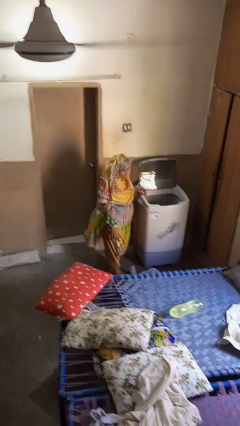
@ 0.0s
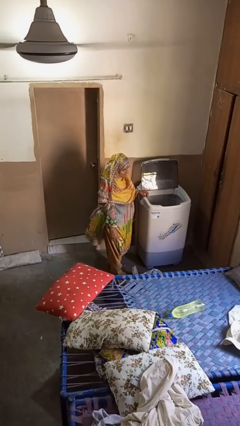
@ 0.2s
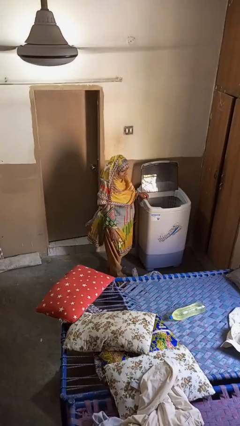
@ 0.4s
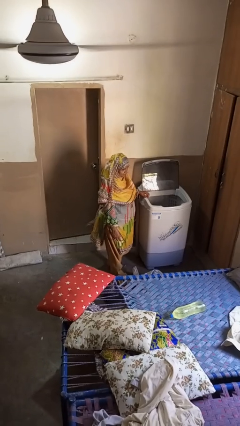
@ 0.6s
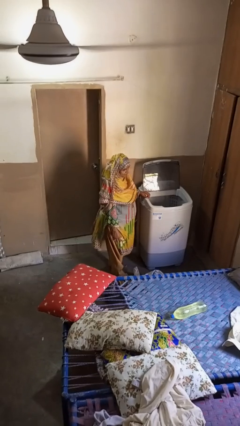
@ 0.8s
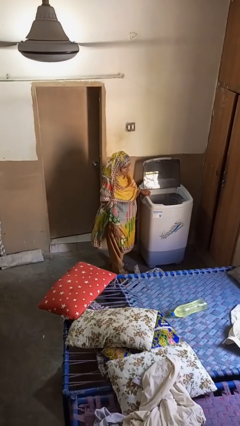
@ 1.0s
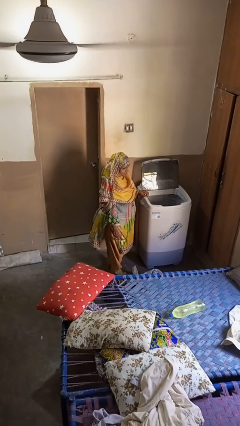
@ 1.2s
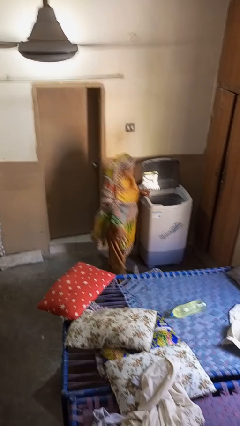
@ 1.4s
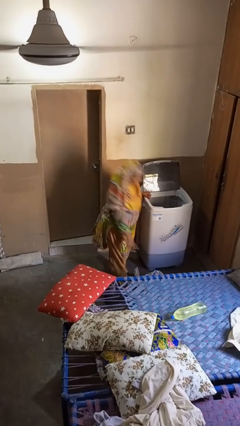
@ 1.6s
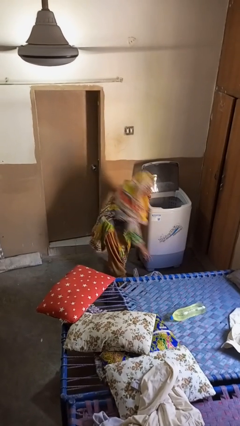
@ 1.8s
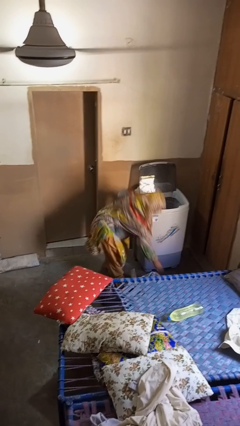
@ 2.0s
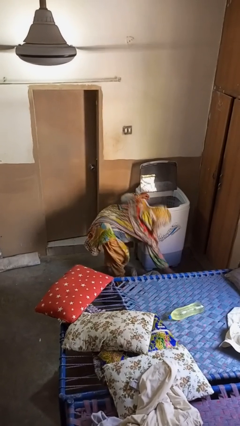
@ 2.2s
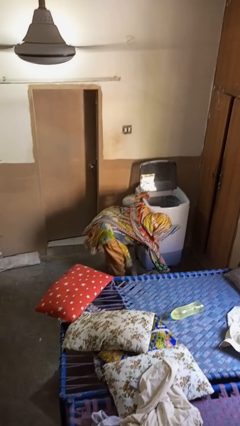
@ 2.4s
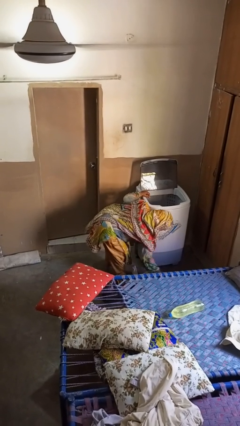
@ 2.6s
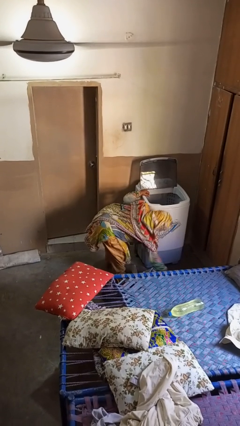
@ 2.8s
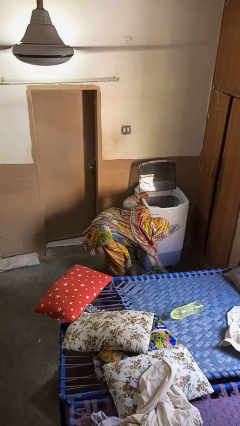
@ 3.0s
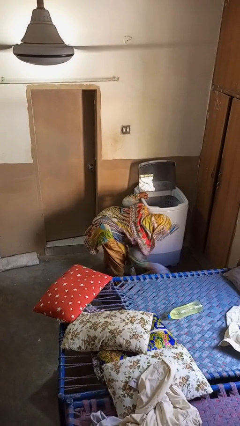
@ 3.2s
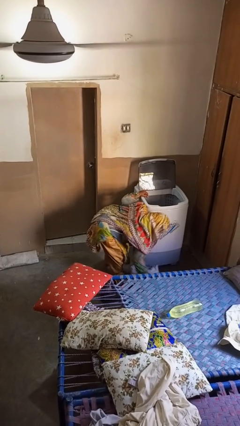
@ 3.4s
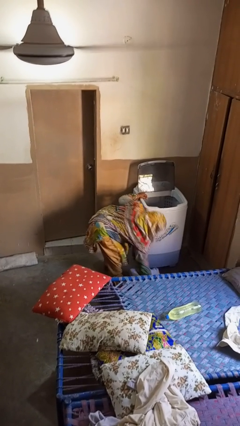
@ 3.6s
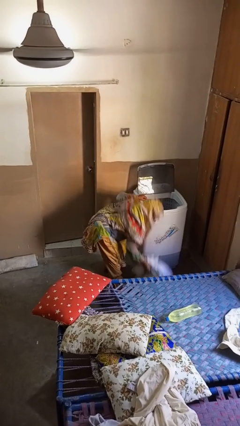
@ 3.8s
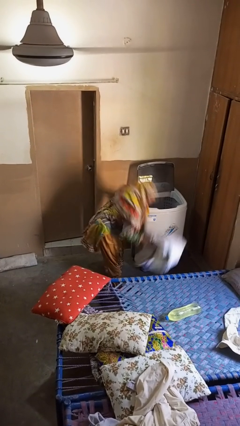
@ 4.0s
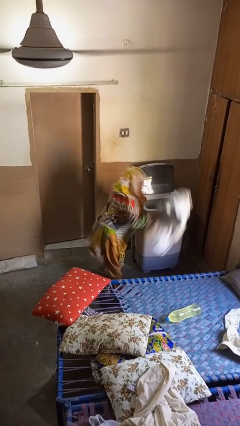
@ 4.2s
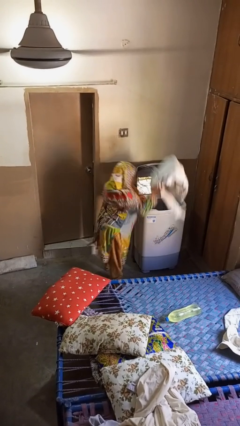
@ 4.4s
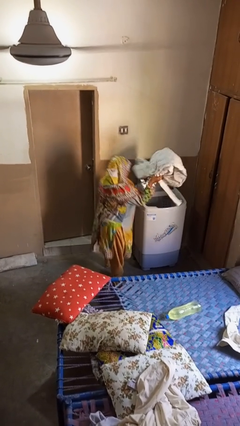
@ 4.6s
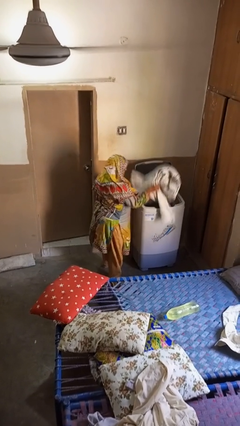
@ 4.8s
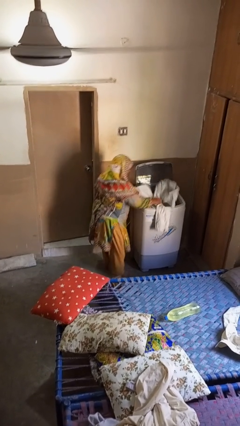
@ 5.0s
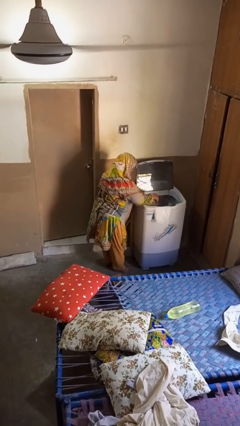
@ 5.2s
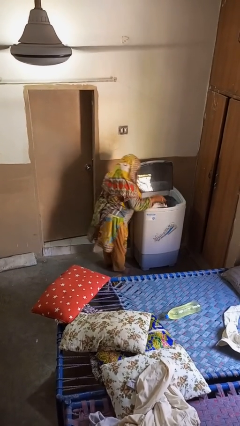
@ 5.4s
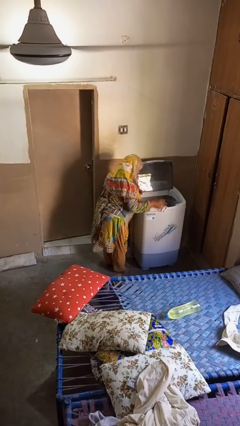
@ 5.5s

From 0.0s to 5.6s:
person loads clotheswasher

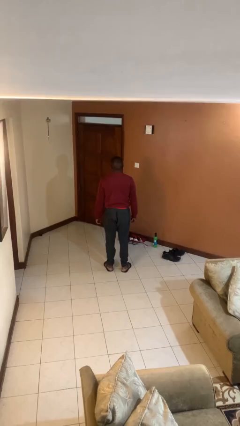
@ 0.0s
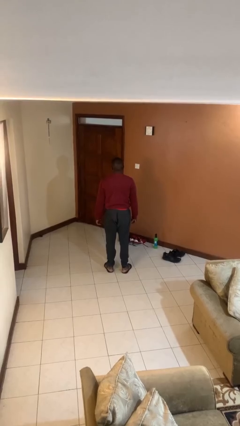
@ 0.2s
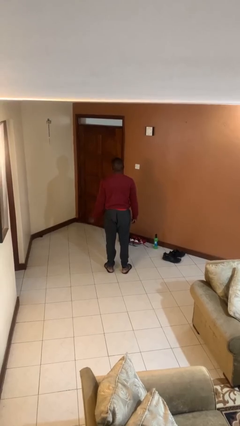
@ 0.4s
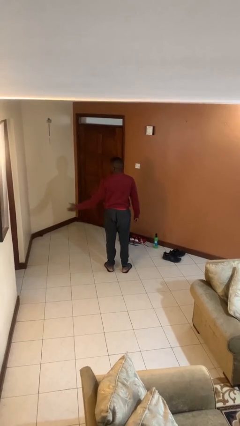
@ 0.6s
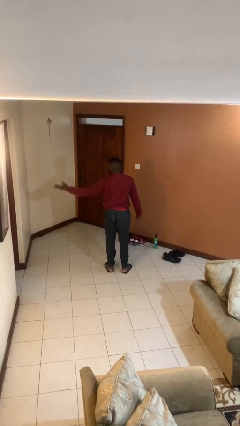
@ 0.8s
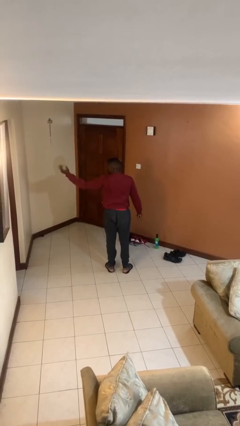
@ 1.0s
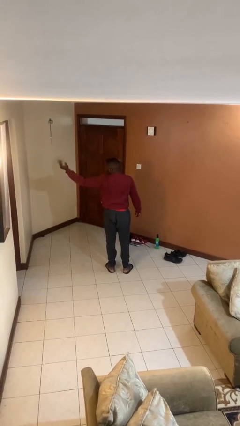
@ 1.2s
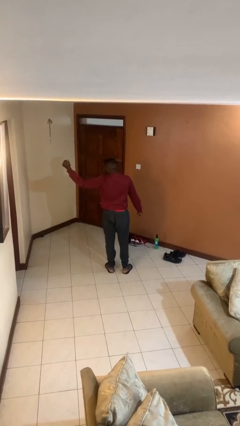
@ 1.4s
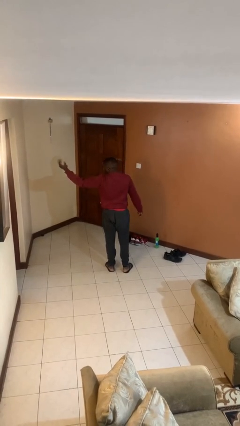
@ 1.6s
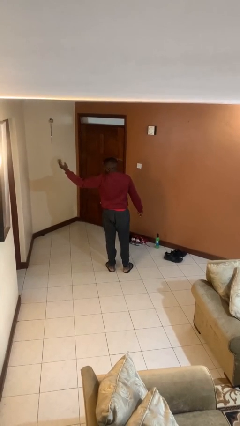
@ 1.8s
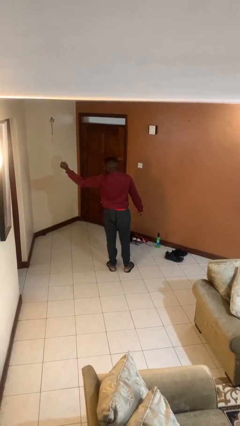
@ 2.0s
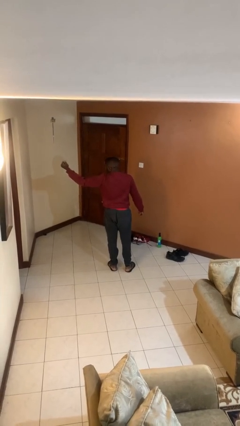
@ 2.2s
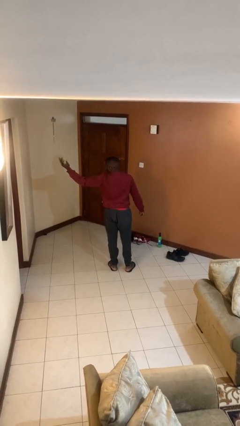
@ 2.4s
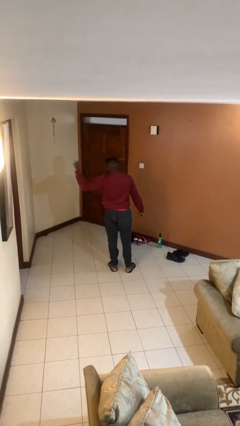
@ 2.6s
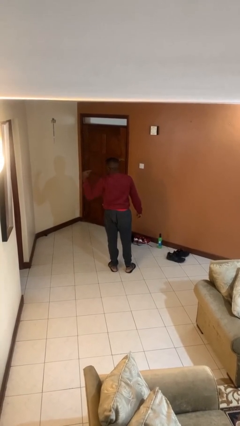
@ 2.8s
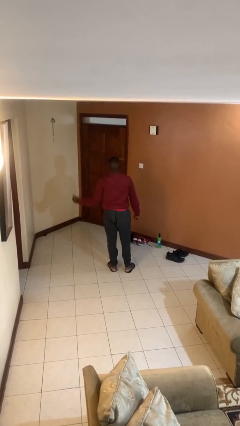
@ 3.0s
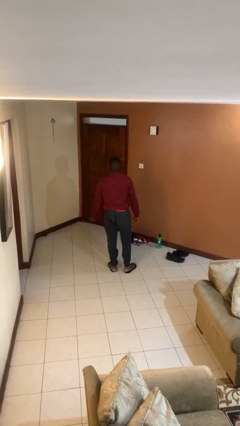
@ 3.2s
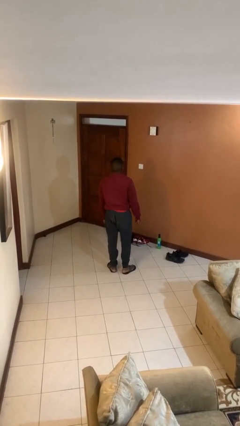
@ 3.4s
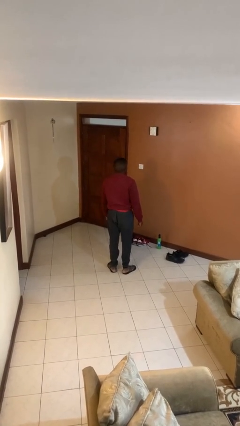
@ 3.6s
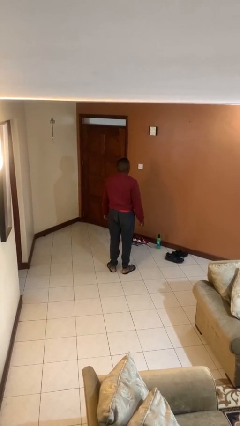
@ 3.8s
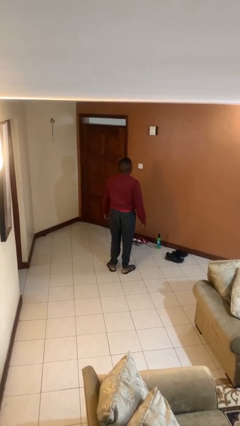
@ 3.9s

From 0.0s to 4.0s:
person gestures come here

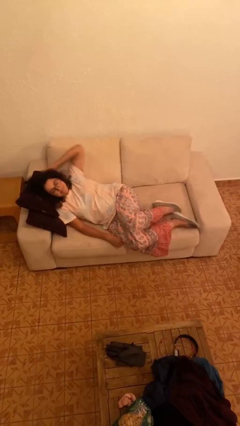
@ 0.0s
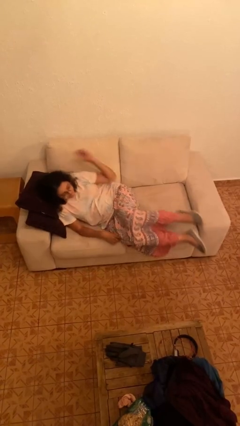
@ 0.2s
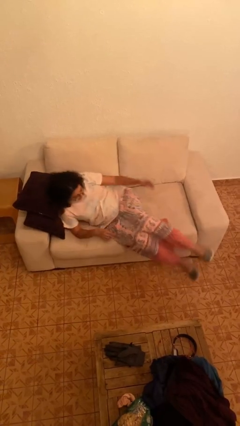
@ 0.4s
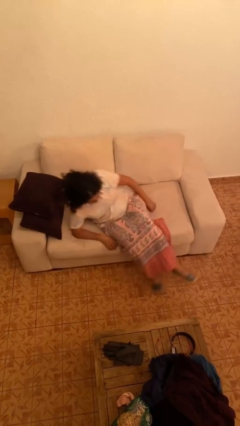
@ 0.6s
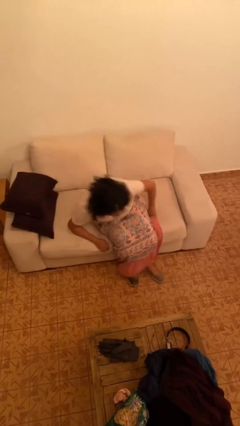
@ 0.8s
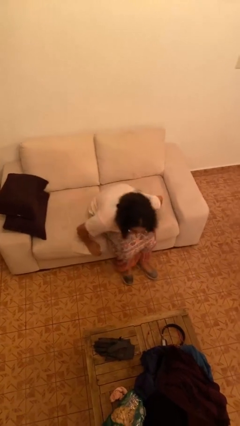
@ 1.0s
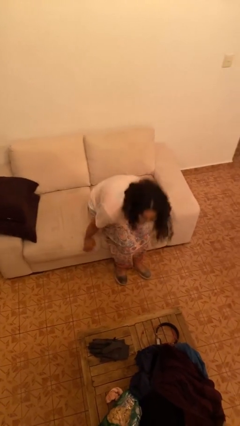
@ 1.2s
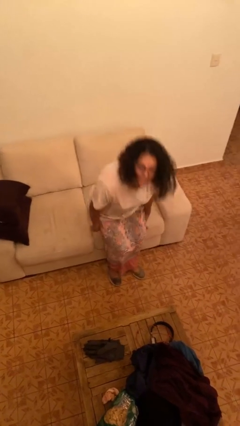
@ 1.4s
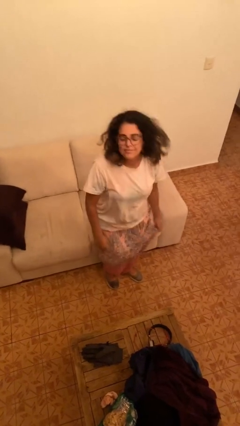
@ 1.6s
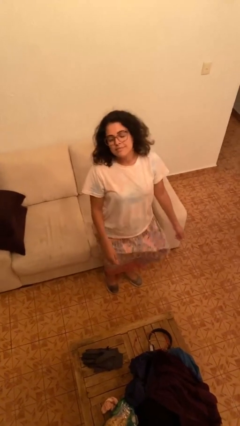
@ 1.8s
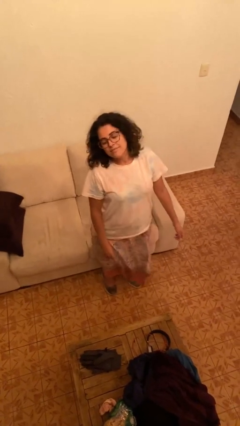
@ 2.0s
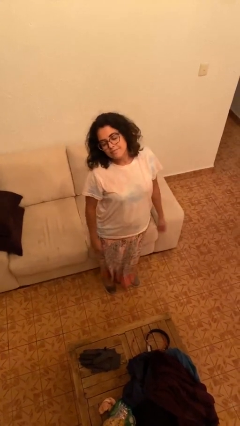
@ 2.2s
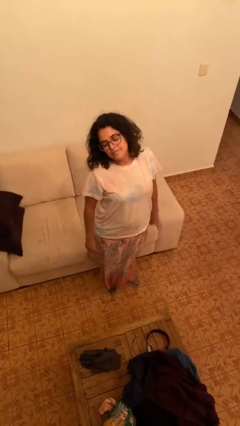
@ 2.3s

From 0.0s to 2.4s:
person stands up

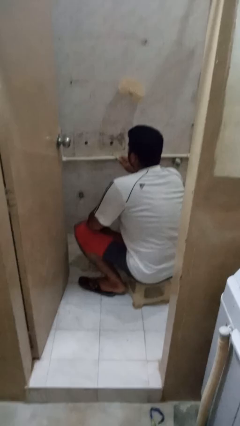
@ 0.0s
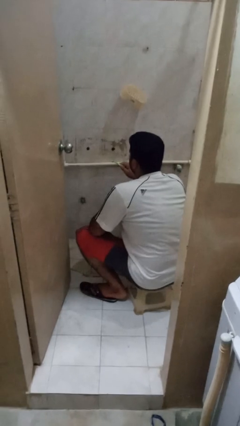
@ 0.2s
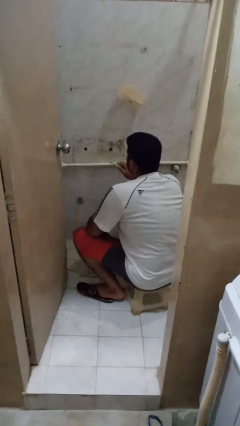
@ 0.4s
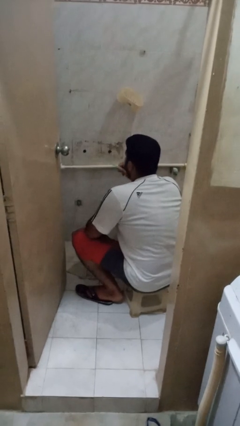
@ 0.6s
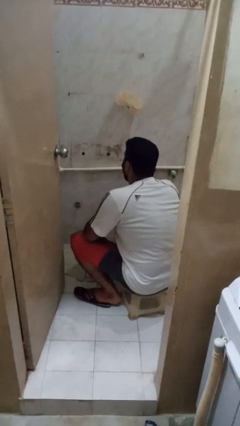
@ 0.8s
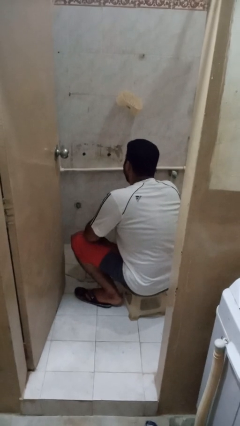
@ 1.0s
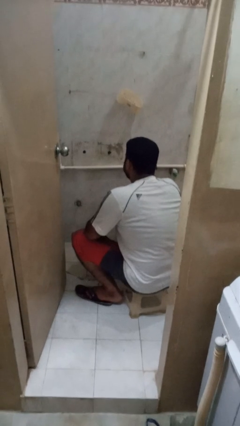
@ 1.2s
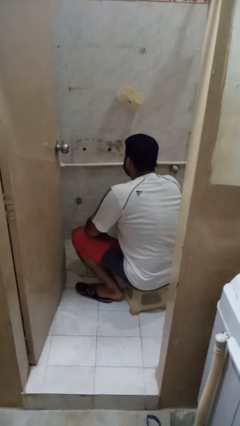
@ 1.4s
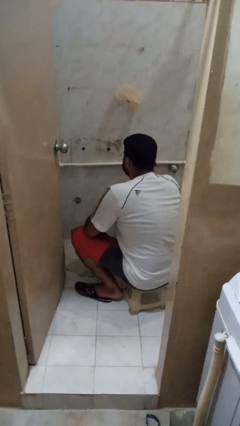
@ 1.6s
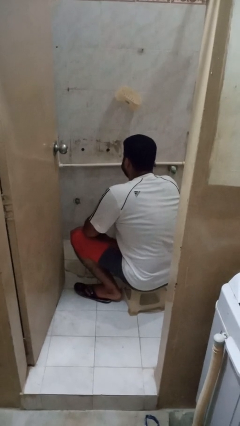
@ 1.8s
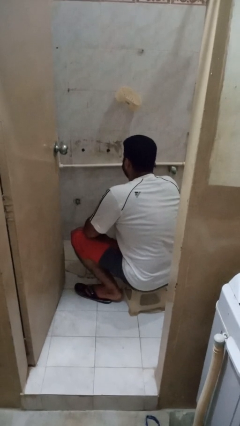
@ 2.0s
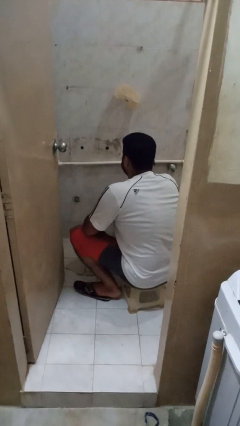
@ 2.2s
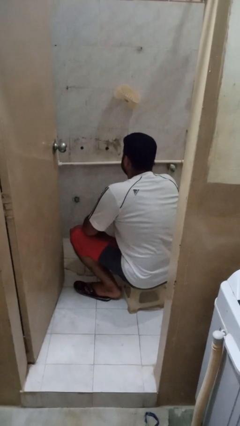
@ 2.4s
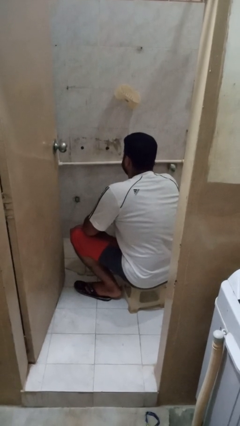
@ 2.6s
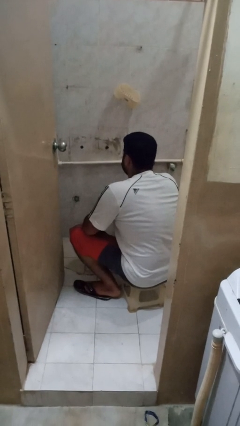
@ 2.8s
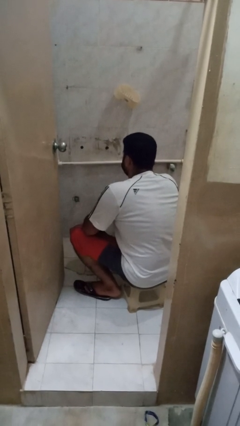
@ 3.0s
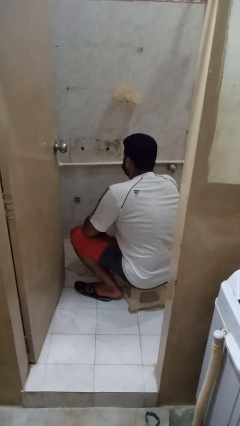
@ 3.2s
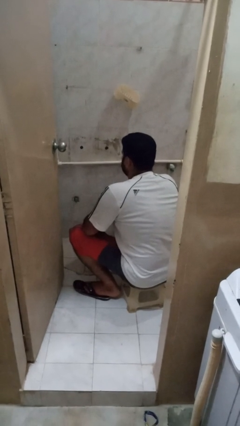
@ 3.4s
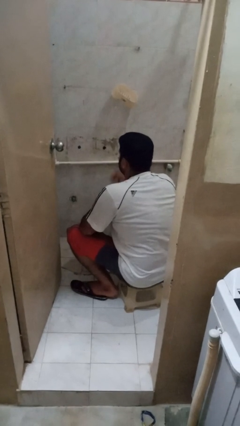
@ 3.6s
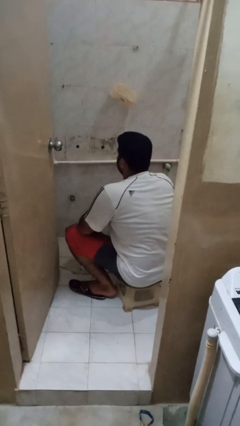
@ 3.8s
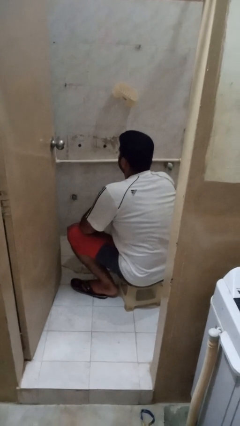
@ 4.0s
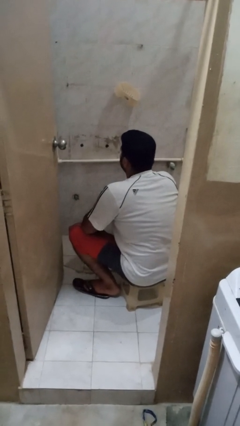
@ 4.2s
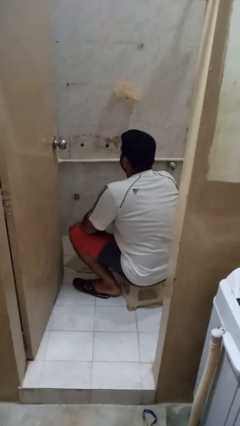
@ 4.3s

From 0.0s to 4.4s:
person brushes teeth

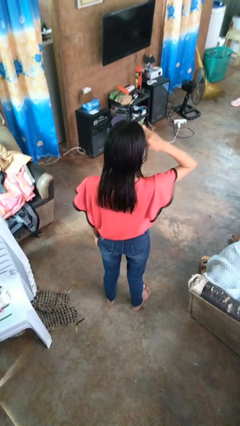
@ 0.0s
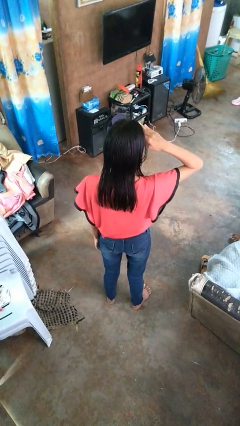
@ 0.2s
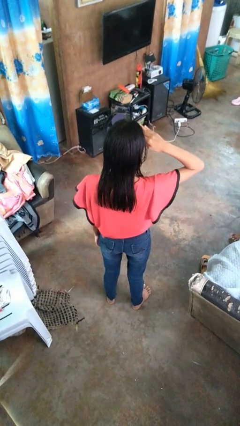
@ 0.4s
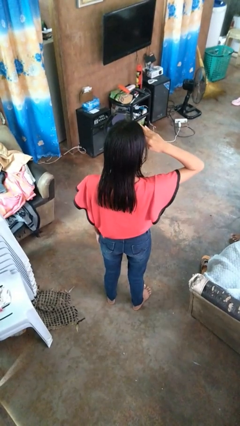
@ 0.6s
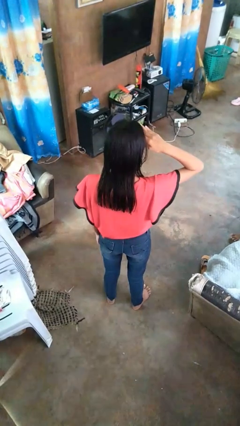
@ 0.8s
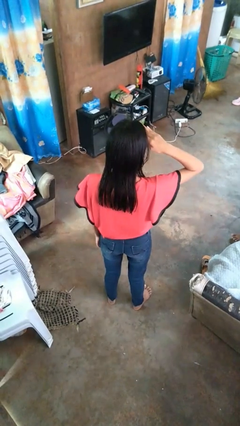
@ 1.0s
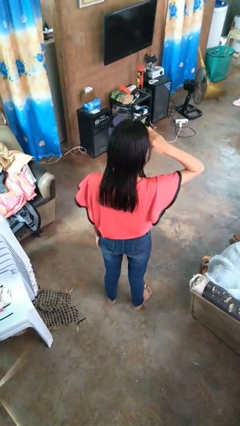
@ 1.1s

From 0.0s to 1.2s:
person salutes
